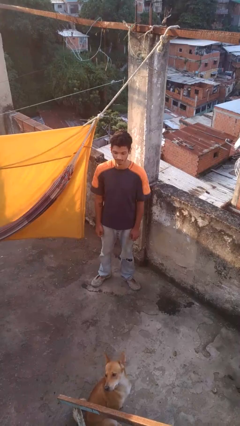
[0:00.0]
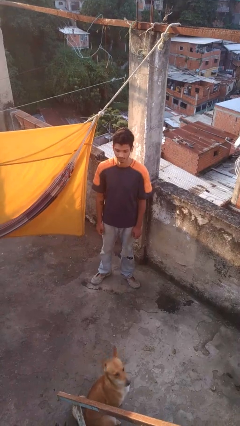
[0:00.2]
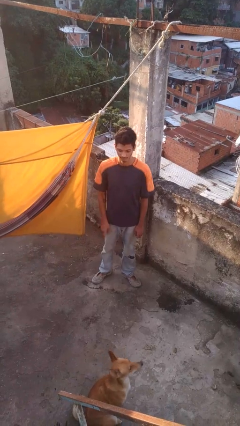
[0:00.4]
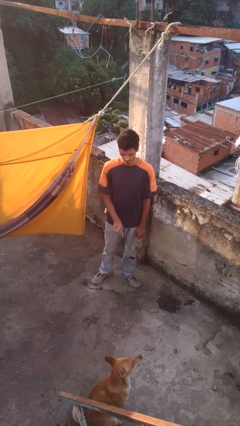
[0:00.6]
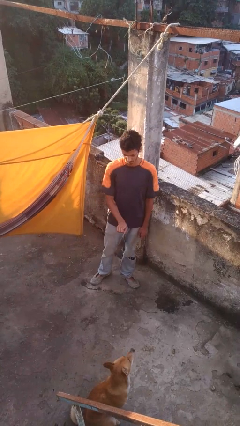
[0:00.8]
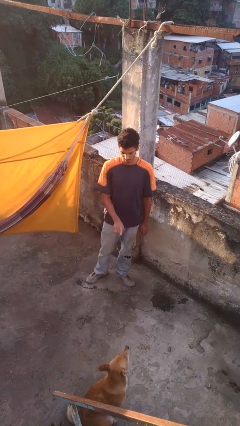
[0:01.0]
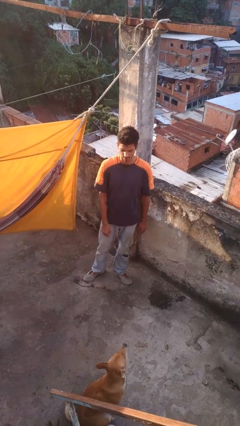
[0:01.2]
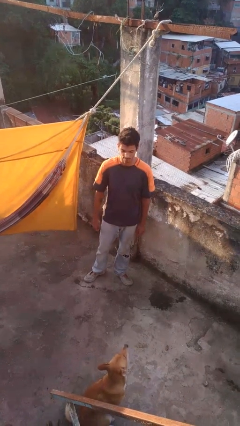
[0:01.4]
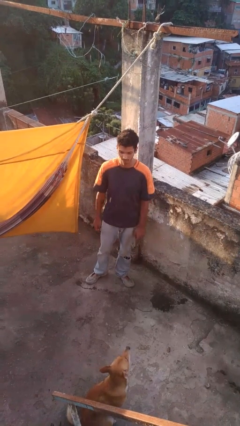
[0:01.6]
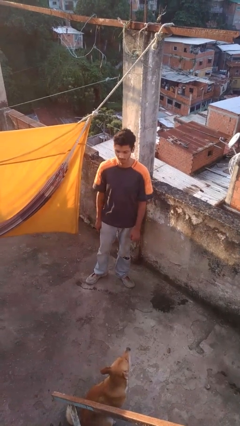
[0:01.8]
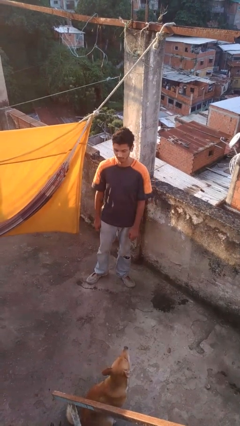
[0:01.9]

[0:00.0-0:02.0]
person gestures number one

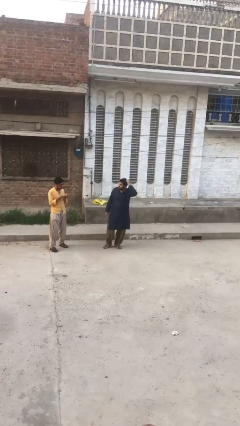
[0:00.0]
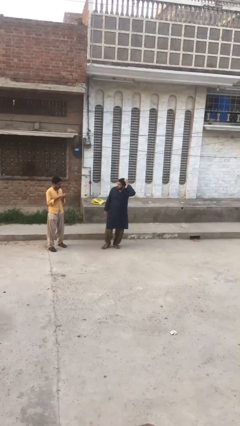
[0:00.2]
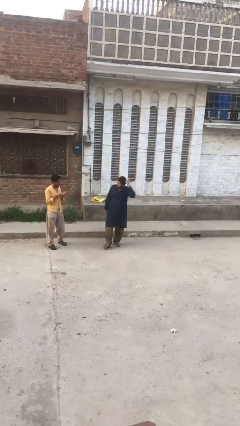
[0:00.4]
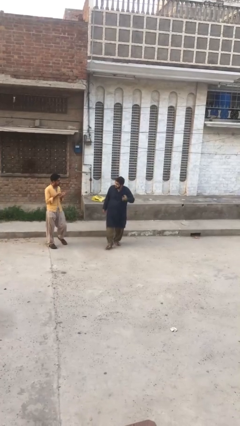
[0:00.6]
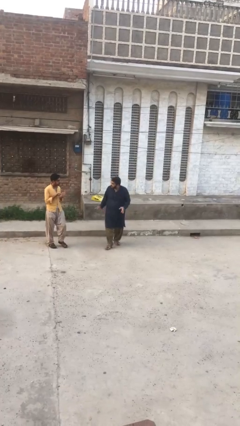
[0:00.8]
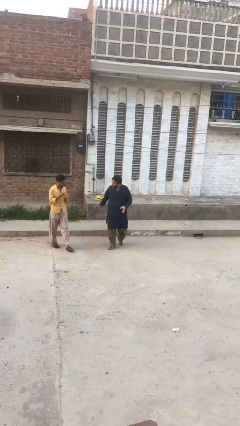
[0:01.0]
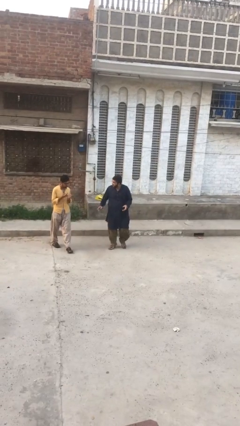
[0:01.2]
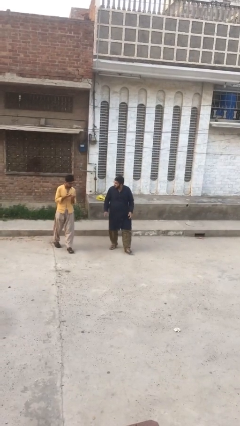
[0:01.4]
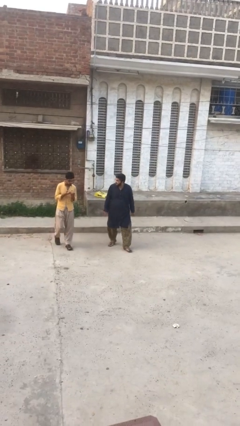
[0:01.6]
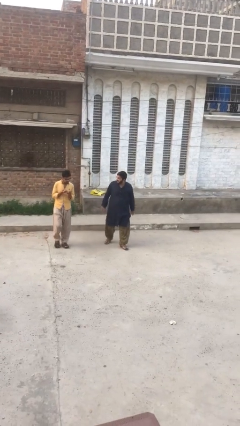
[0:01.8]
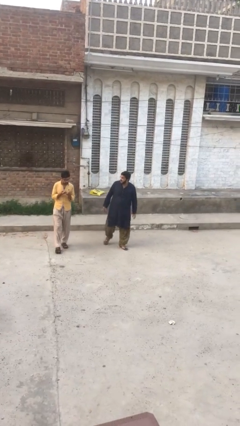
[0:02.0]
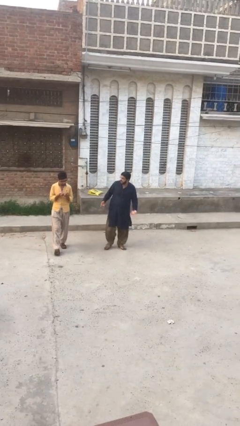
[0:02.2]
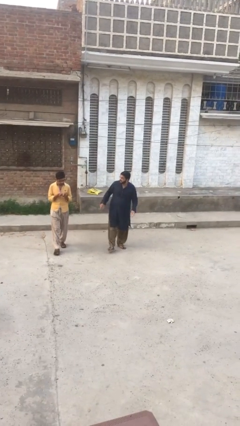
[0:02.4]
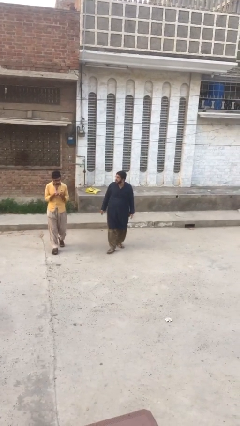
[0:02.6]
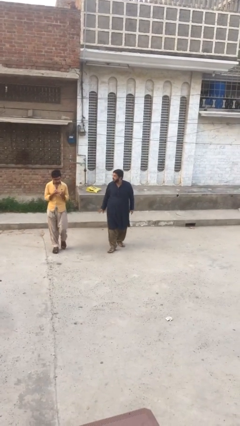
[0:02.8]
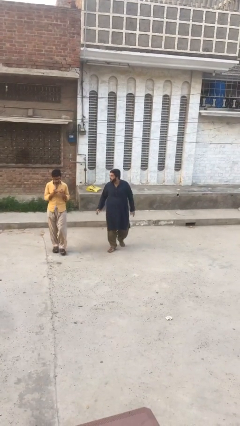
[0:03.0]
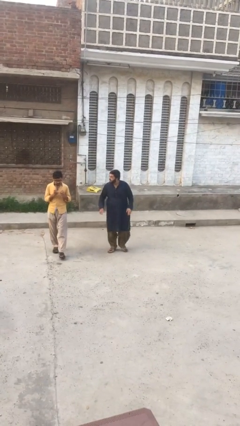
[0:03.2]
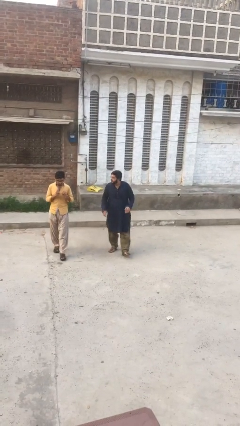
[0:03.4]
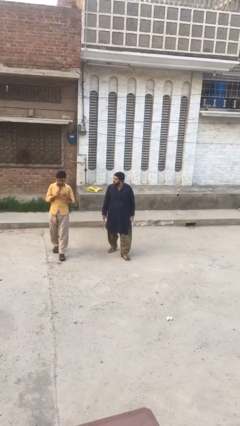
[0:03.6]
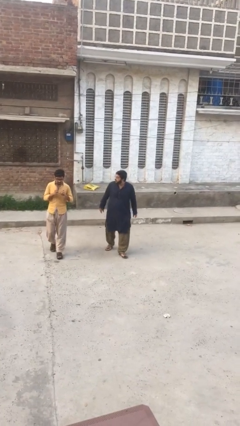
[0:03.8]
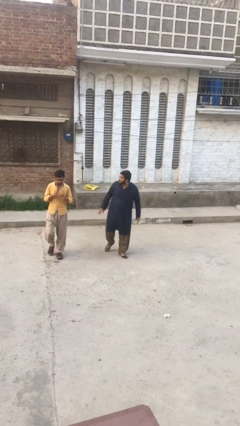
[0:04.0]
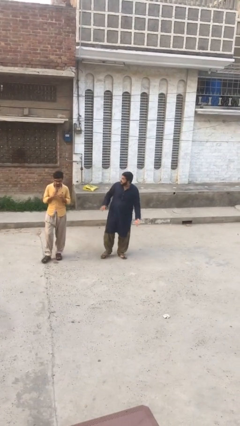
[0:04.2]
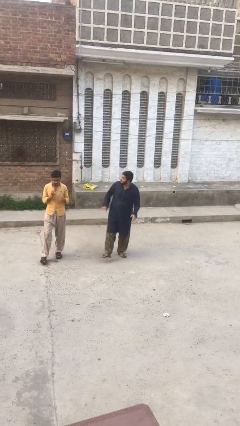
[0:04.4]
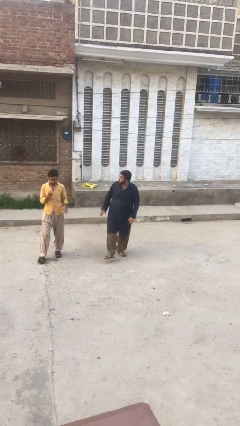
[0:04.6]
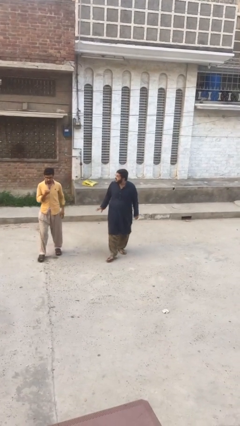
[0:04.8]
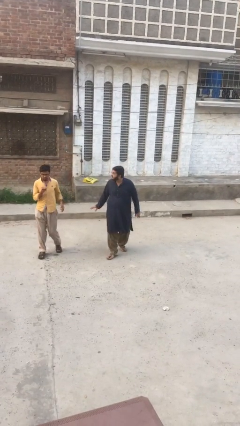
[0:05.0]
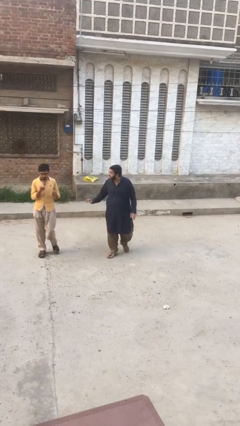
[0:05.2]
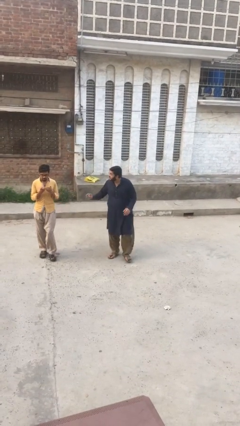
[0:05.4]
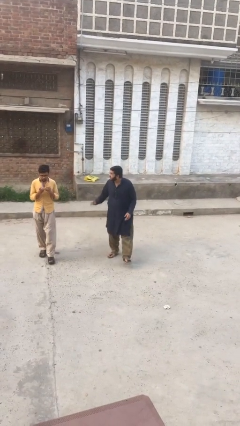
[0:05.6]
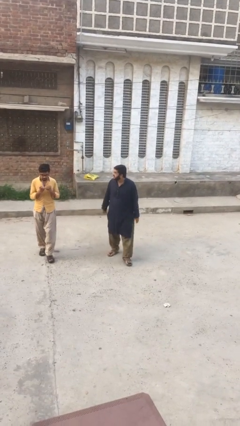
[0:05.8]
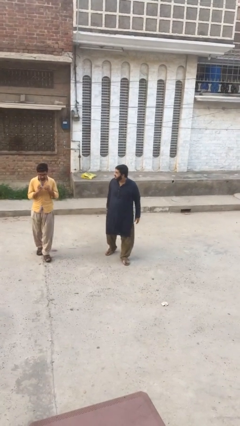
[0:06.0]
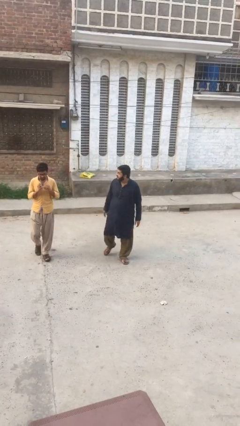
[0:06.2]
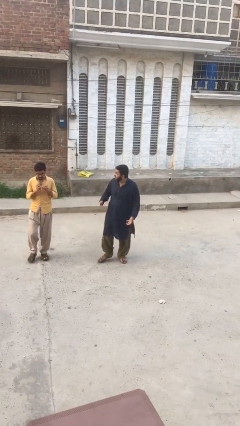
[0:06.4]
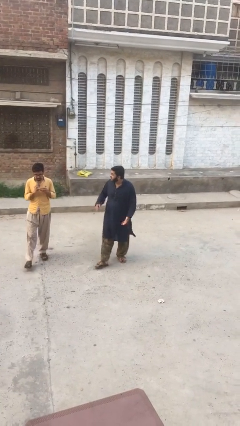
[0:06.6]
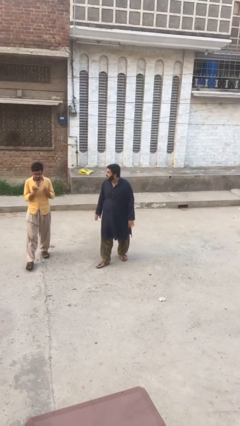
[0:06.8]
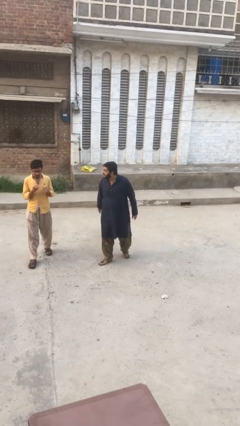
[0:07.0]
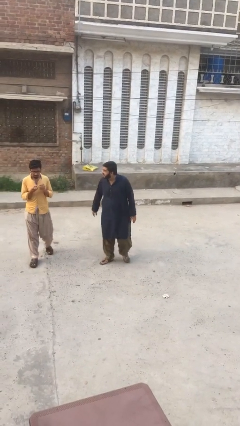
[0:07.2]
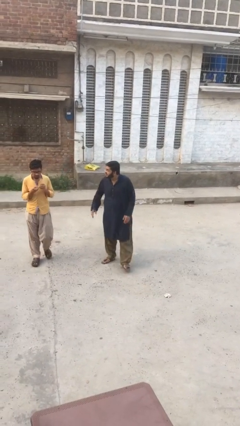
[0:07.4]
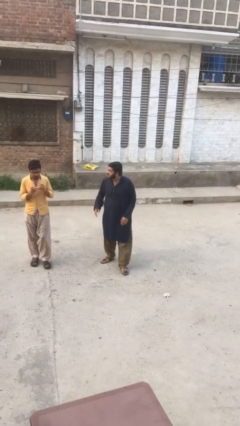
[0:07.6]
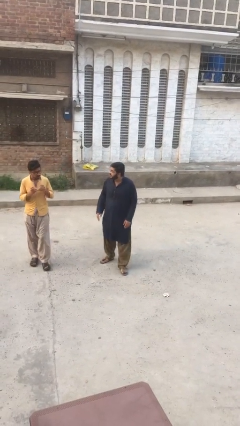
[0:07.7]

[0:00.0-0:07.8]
person talks to person

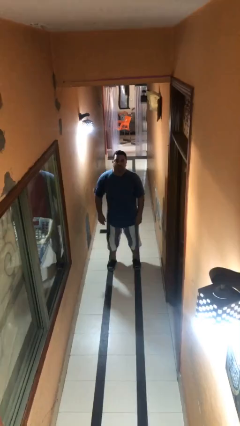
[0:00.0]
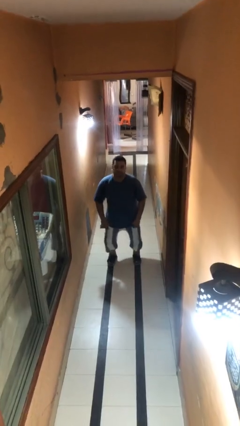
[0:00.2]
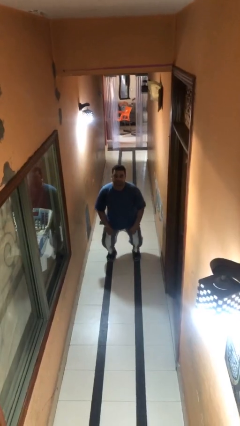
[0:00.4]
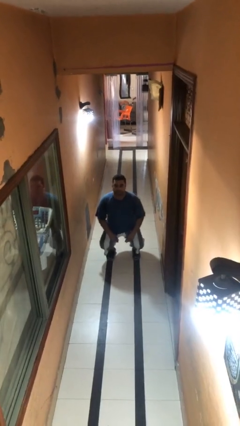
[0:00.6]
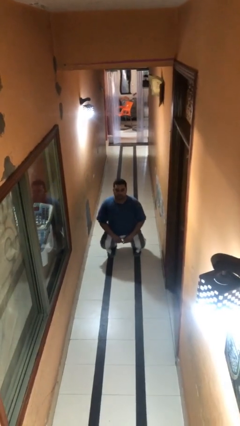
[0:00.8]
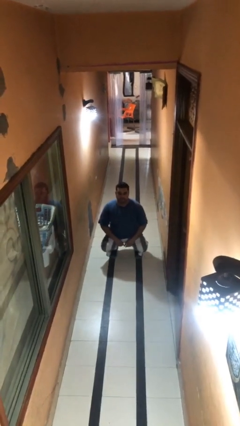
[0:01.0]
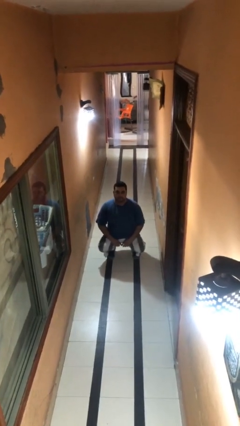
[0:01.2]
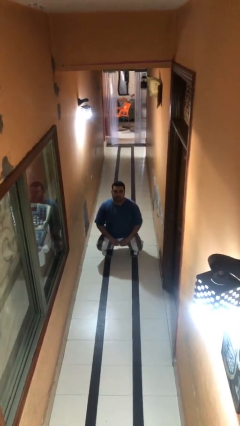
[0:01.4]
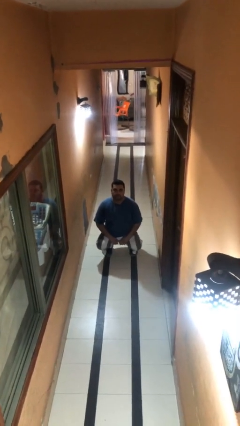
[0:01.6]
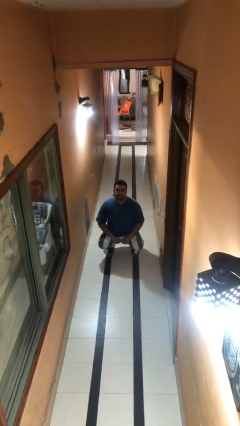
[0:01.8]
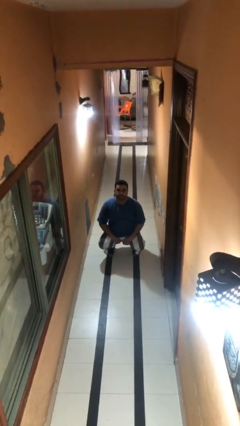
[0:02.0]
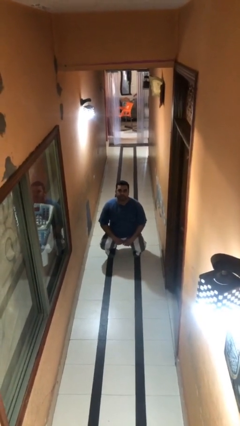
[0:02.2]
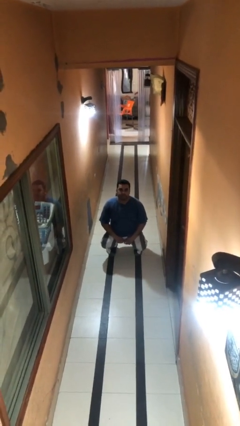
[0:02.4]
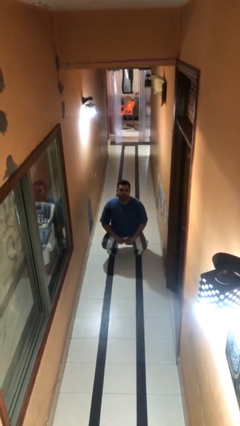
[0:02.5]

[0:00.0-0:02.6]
person squats

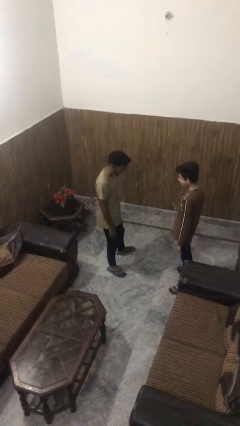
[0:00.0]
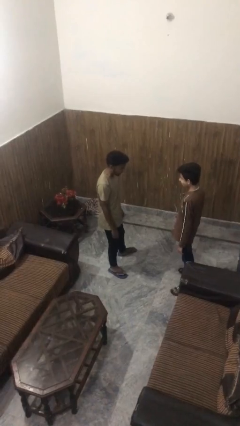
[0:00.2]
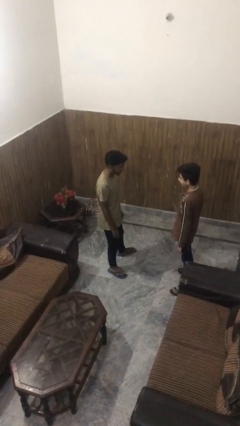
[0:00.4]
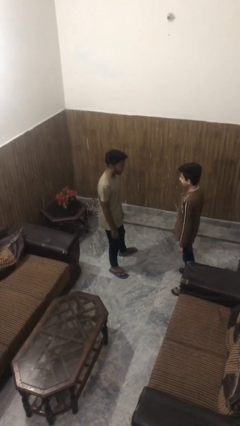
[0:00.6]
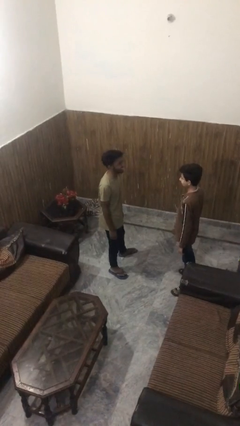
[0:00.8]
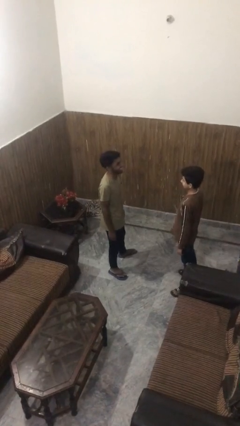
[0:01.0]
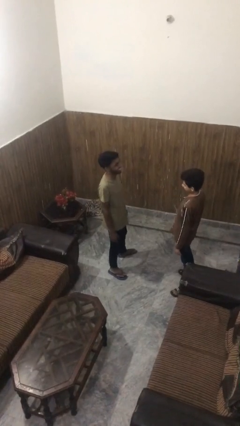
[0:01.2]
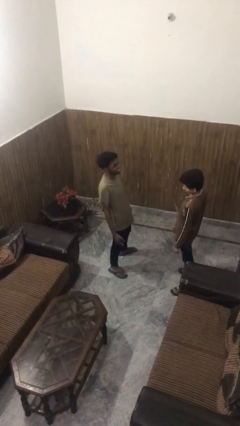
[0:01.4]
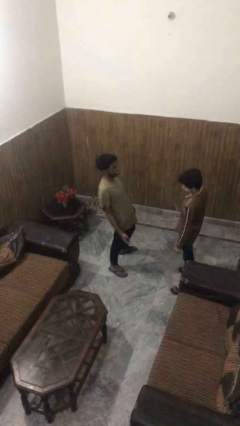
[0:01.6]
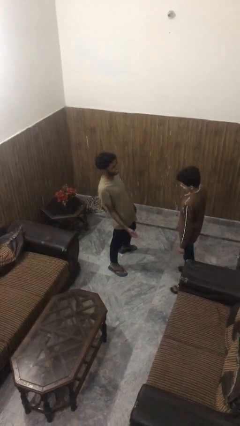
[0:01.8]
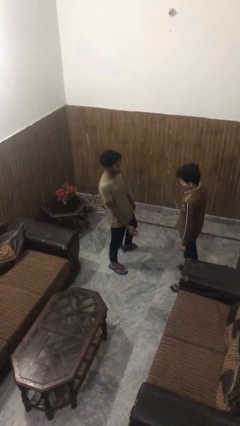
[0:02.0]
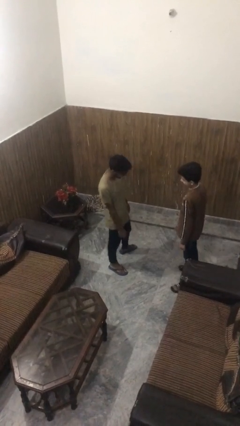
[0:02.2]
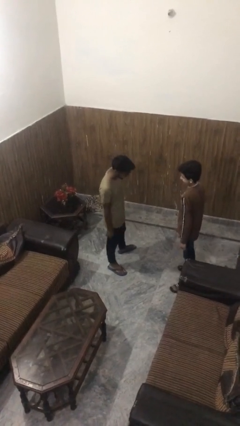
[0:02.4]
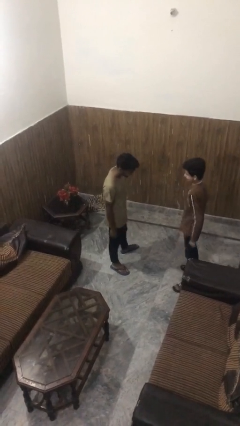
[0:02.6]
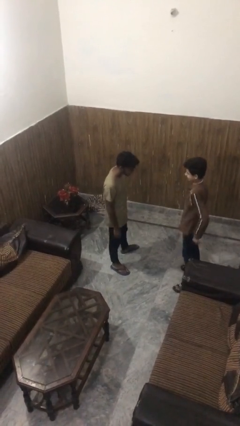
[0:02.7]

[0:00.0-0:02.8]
person laughs with person

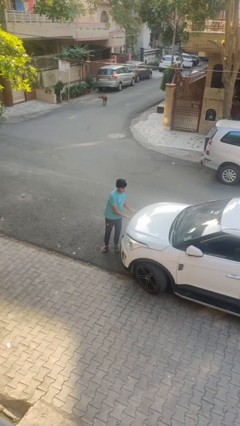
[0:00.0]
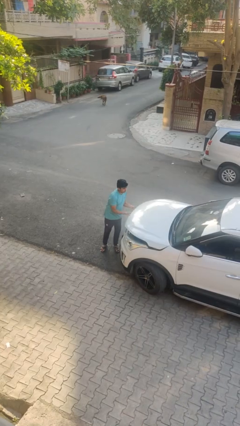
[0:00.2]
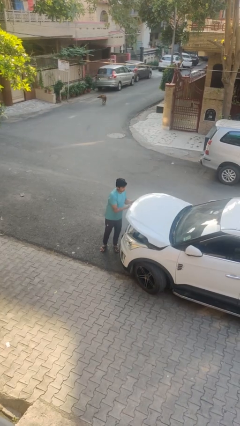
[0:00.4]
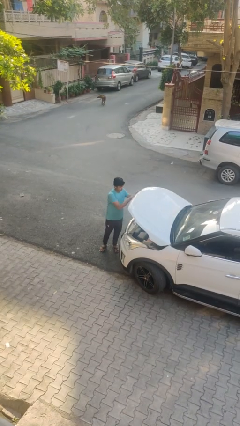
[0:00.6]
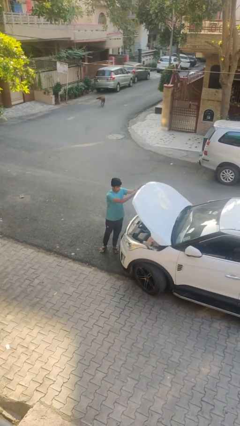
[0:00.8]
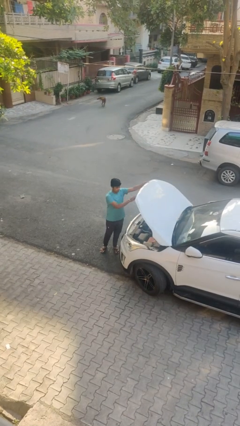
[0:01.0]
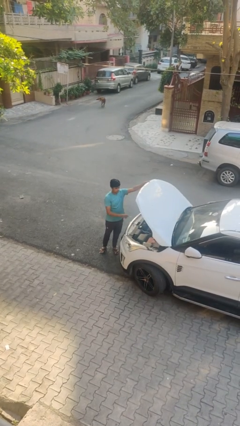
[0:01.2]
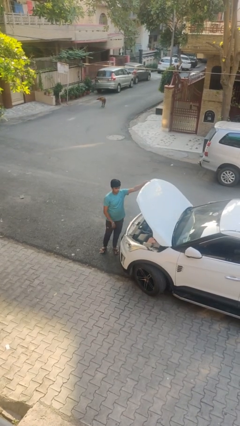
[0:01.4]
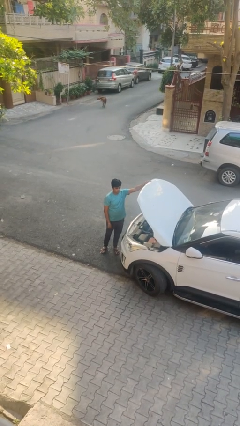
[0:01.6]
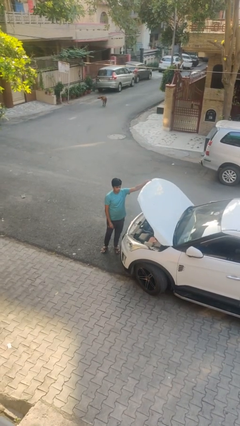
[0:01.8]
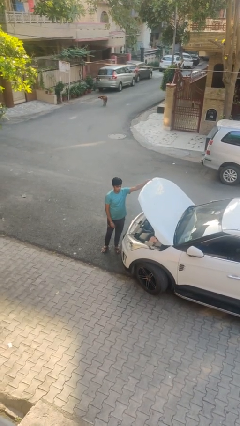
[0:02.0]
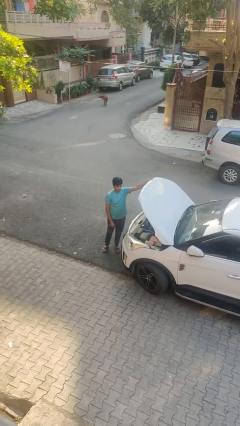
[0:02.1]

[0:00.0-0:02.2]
person opens car hood
